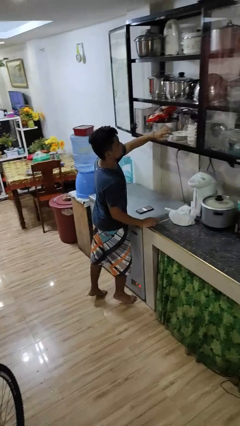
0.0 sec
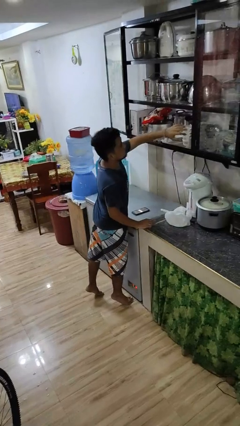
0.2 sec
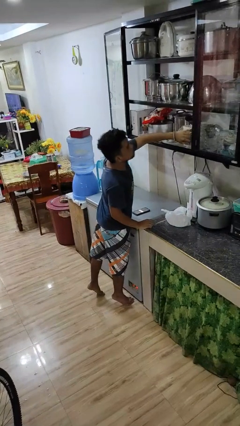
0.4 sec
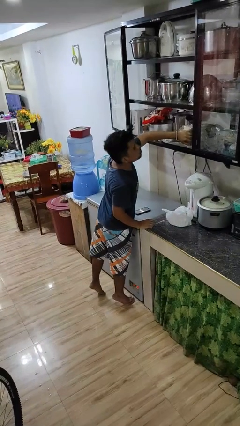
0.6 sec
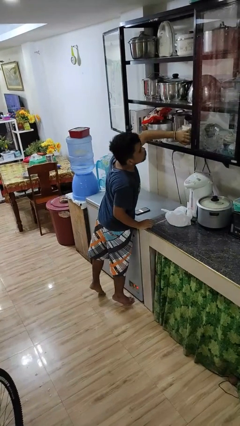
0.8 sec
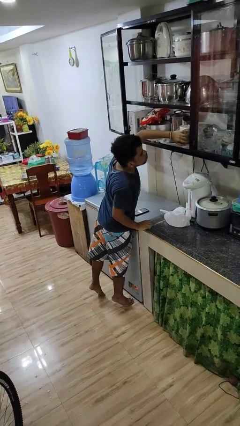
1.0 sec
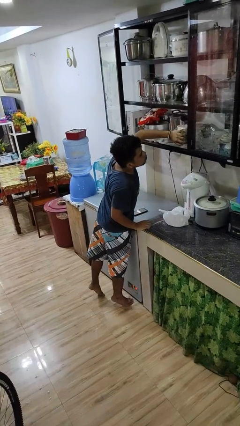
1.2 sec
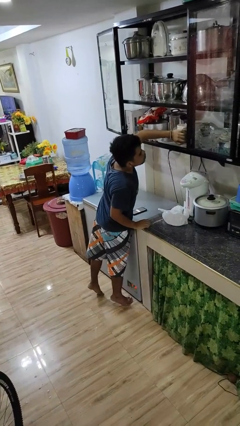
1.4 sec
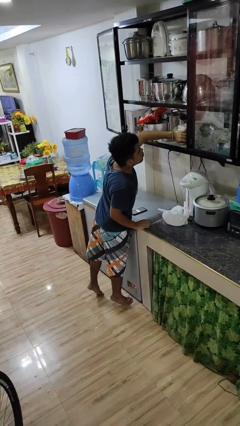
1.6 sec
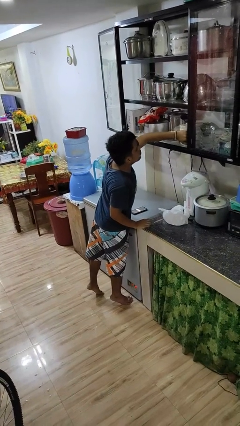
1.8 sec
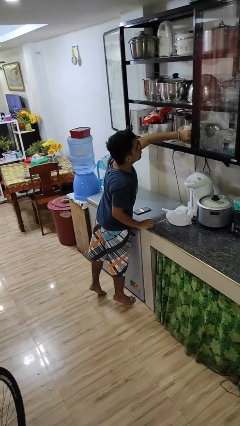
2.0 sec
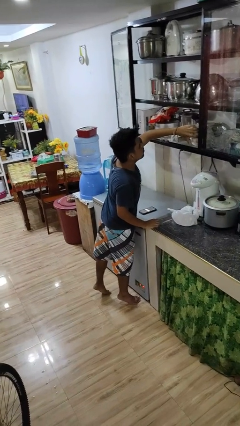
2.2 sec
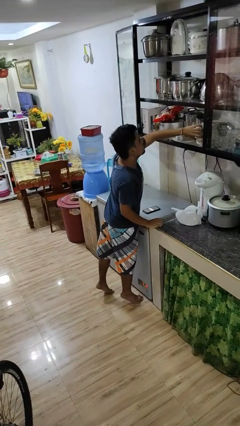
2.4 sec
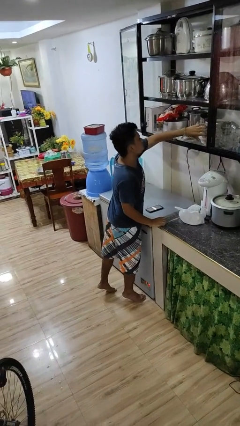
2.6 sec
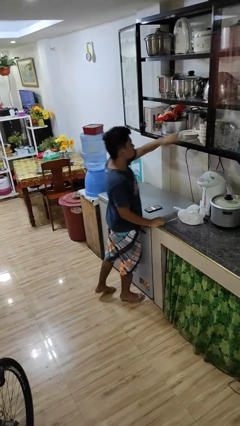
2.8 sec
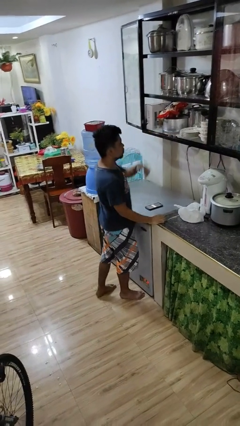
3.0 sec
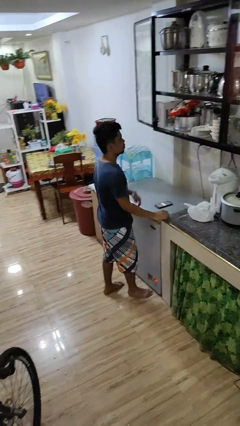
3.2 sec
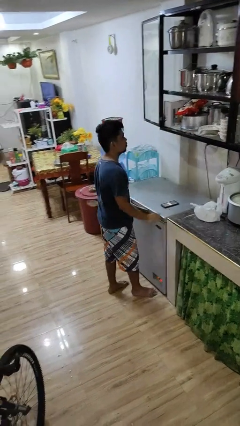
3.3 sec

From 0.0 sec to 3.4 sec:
person searches in cabinet

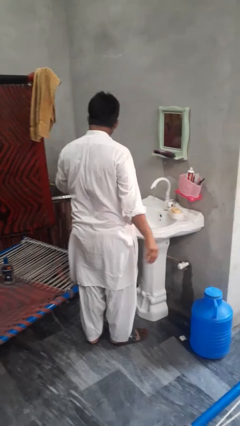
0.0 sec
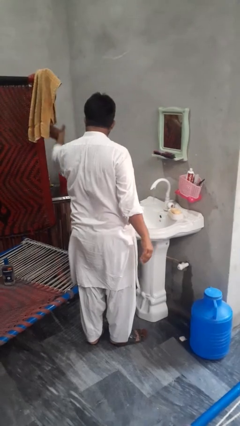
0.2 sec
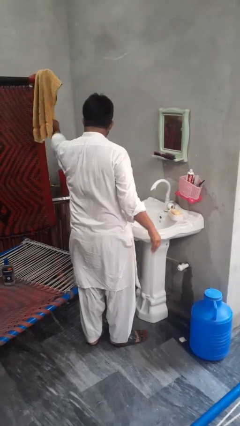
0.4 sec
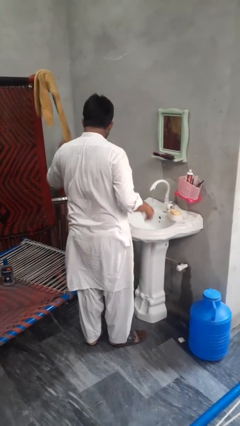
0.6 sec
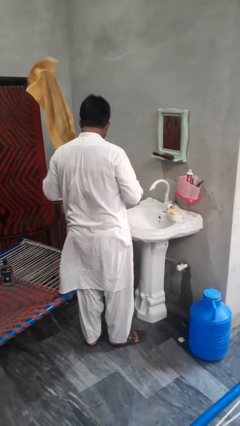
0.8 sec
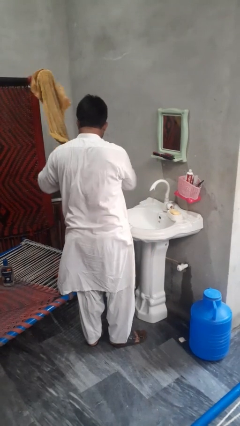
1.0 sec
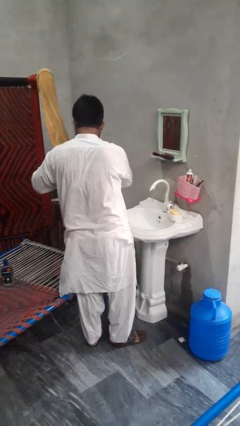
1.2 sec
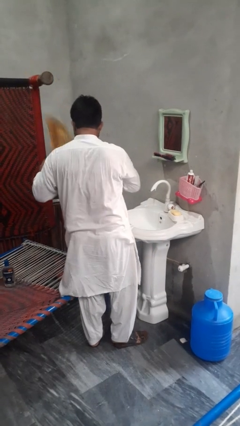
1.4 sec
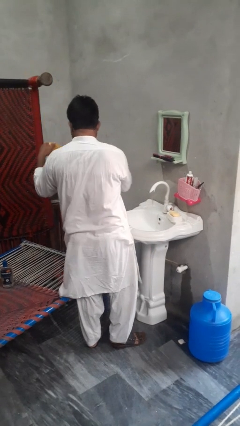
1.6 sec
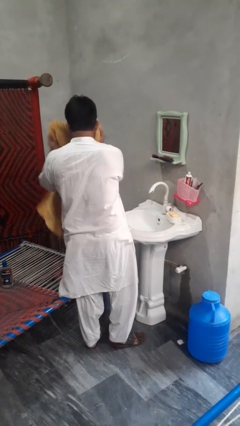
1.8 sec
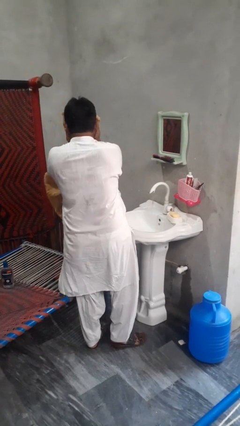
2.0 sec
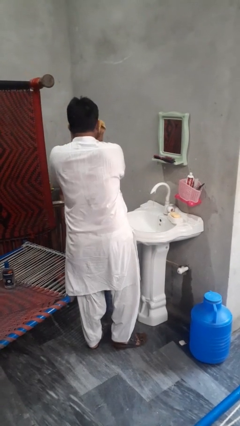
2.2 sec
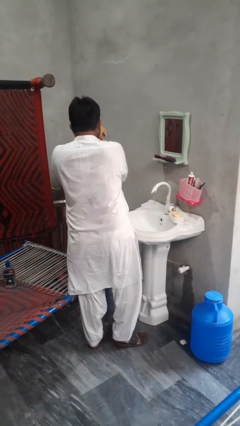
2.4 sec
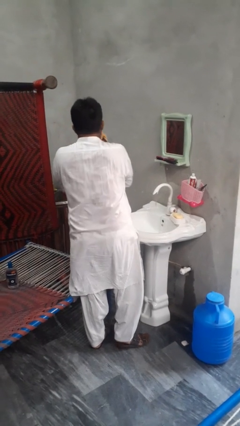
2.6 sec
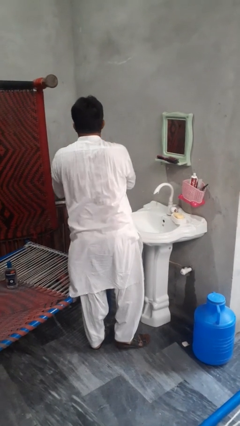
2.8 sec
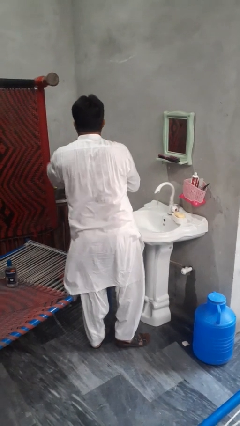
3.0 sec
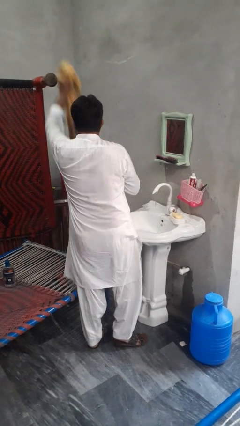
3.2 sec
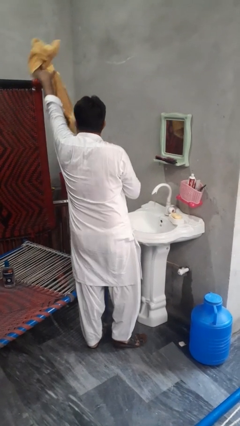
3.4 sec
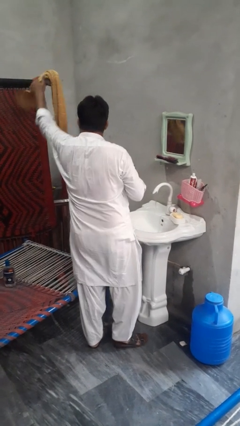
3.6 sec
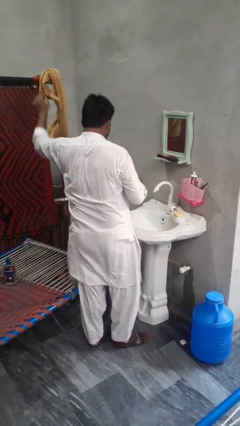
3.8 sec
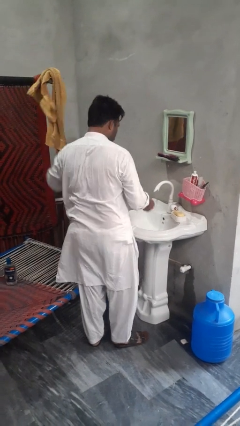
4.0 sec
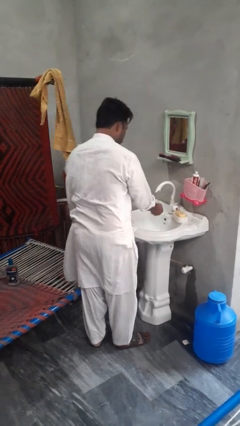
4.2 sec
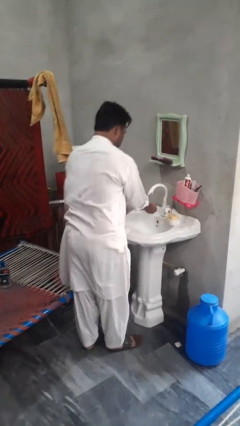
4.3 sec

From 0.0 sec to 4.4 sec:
person dries face with towel

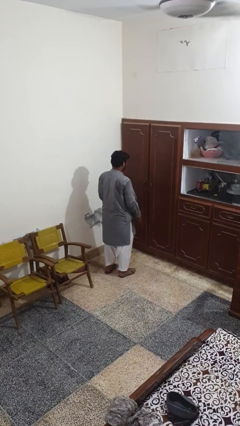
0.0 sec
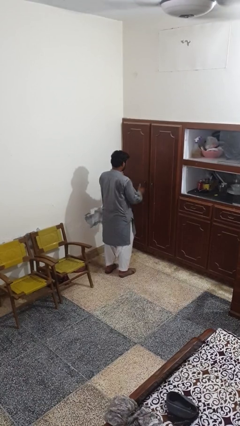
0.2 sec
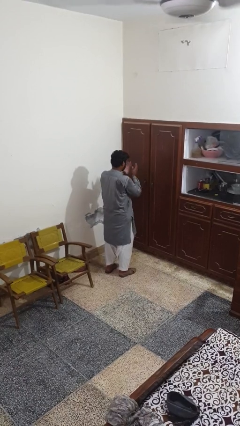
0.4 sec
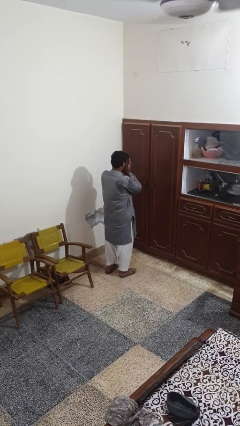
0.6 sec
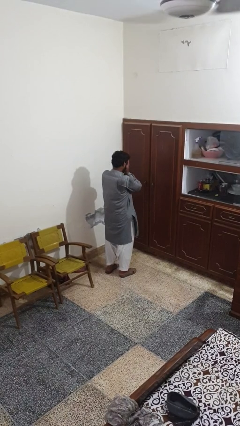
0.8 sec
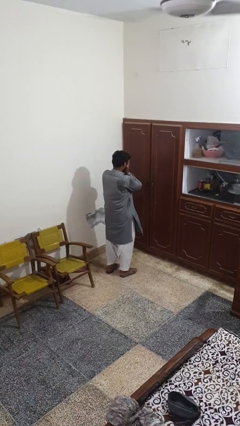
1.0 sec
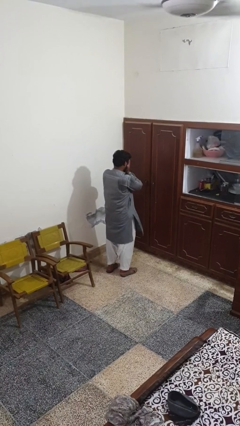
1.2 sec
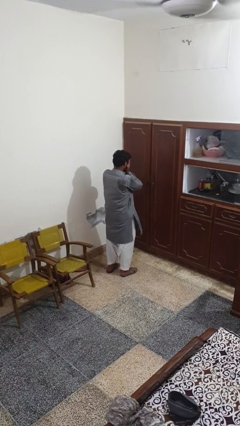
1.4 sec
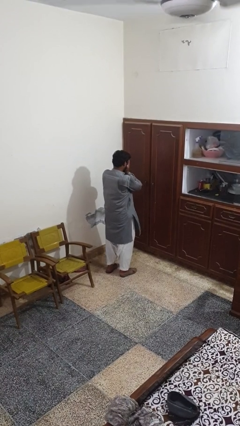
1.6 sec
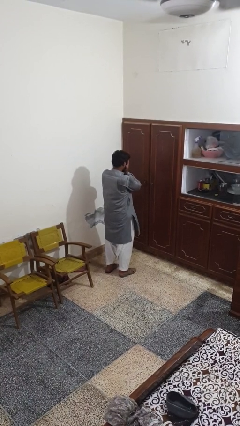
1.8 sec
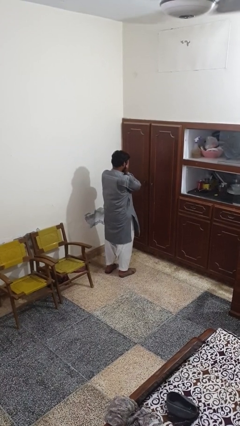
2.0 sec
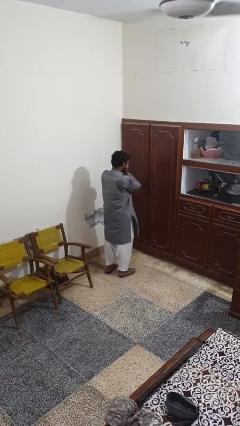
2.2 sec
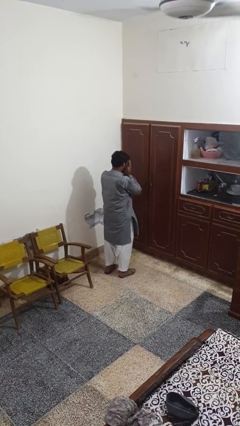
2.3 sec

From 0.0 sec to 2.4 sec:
person covers face with hands

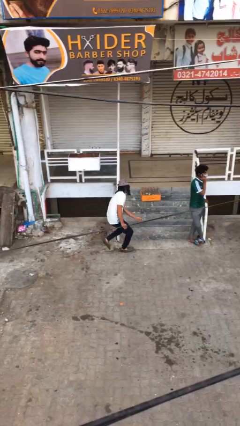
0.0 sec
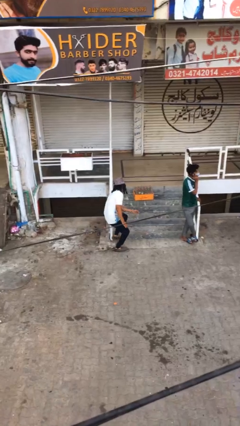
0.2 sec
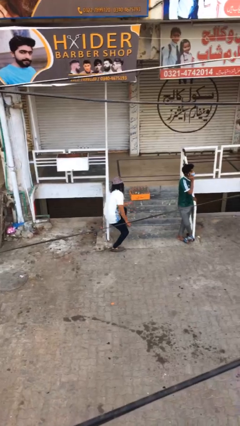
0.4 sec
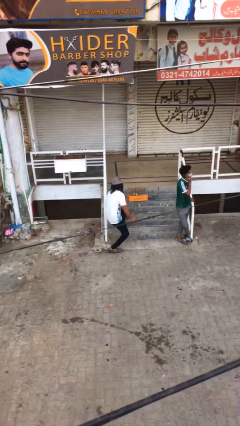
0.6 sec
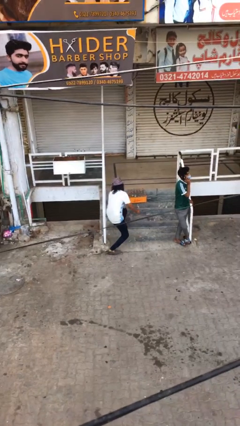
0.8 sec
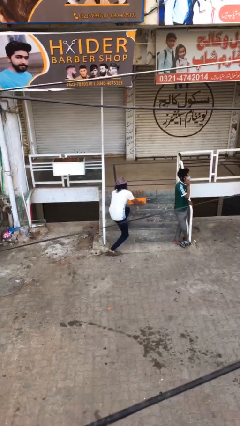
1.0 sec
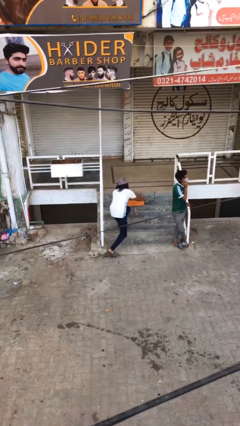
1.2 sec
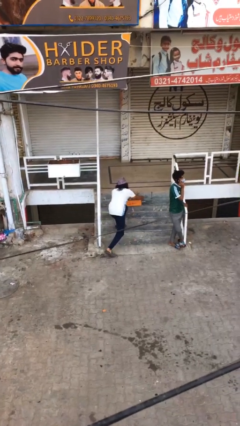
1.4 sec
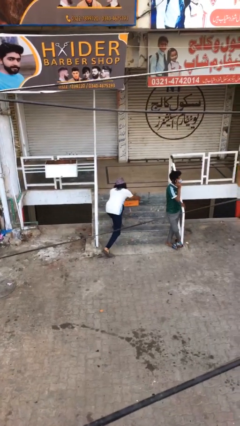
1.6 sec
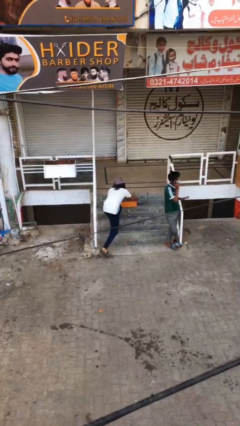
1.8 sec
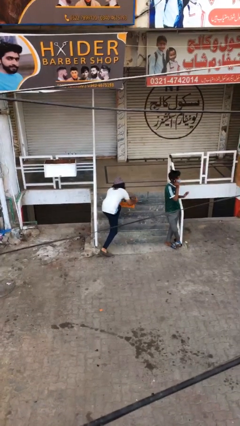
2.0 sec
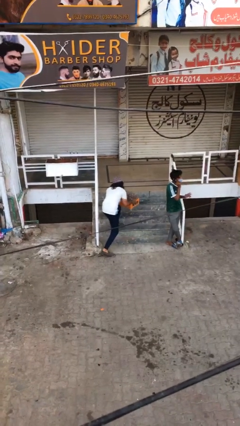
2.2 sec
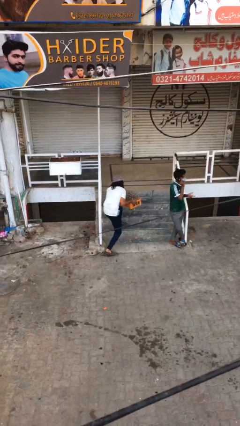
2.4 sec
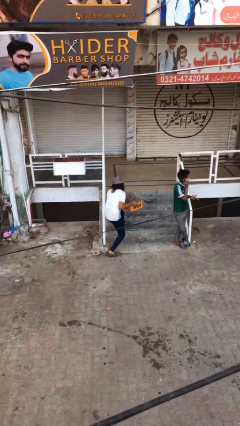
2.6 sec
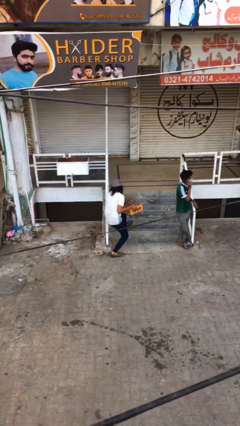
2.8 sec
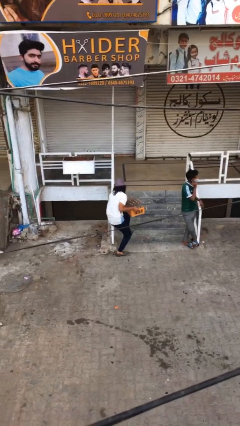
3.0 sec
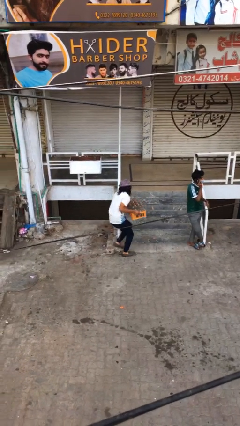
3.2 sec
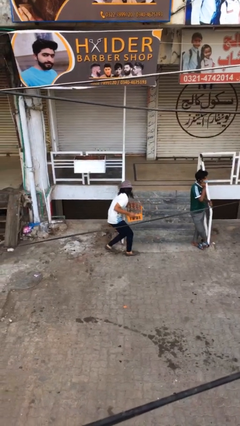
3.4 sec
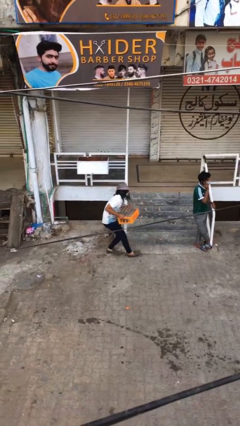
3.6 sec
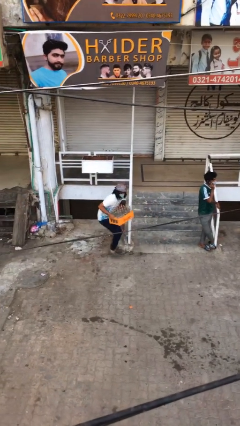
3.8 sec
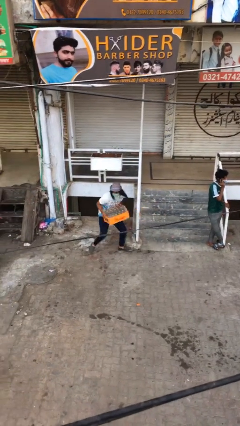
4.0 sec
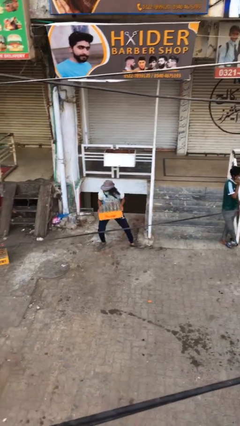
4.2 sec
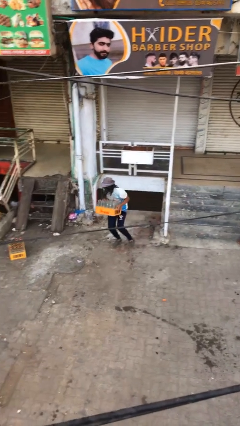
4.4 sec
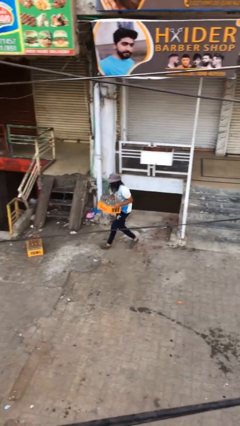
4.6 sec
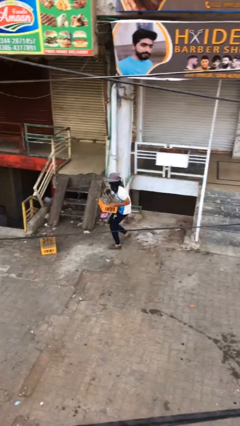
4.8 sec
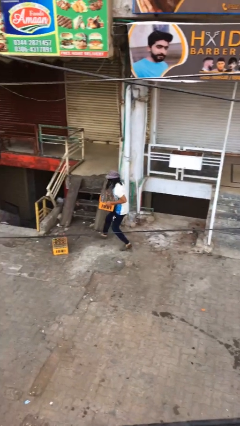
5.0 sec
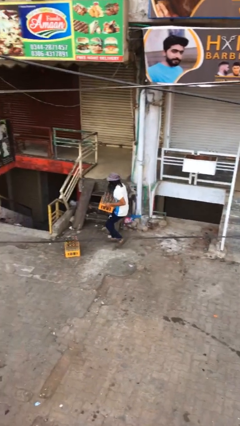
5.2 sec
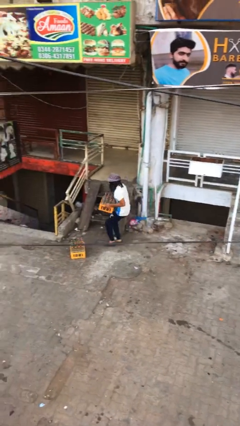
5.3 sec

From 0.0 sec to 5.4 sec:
person steals object from person

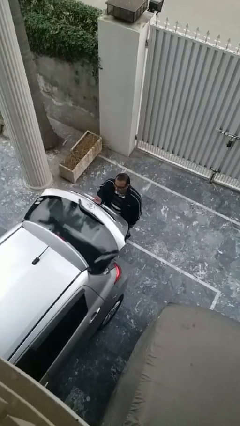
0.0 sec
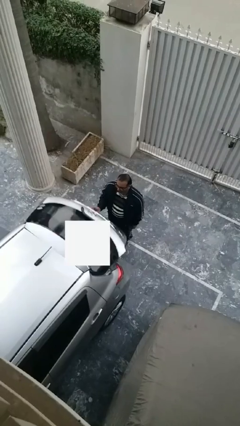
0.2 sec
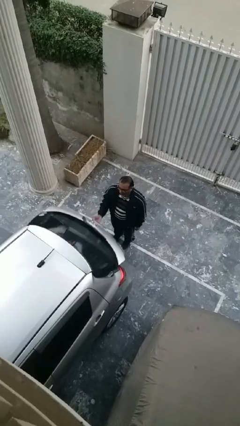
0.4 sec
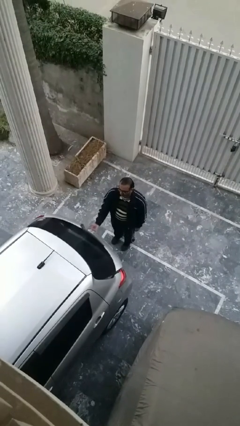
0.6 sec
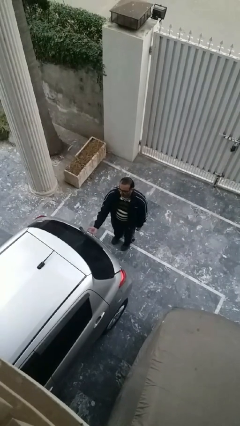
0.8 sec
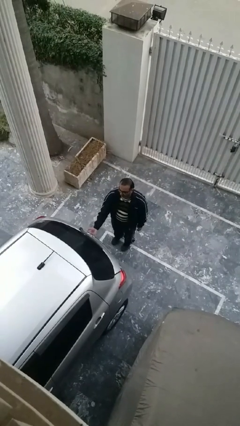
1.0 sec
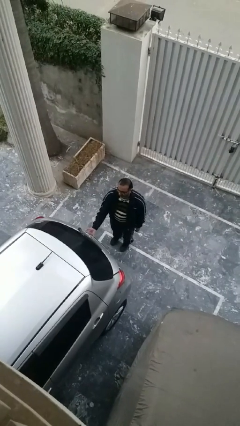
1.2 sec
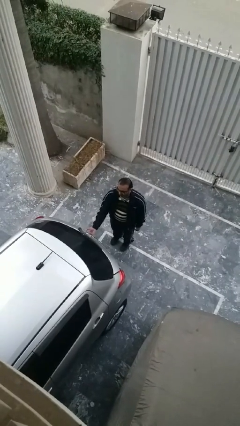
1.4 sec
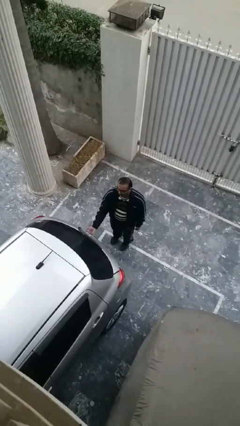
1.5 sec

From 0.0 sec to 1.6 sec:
person closes car trunk

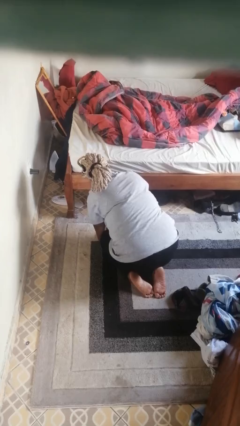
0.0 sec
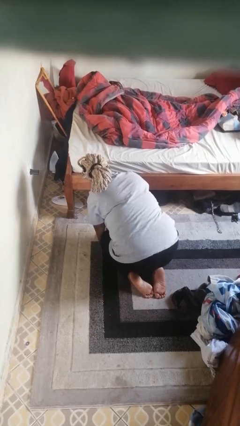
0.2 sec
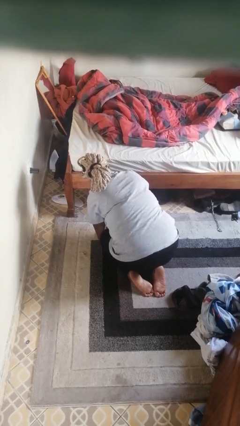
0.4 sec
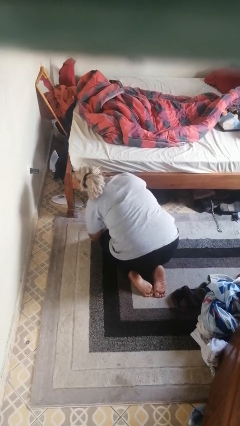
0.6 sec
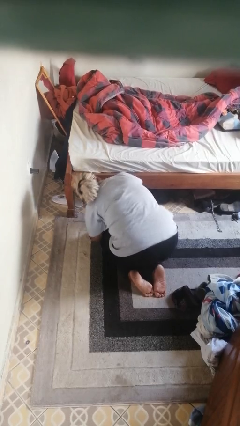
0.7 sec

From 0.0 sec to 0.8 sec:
person searches under bed
